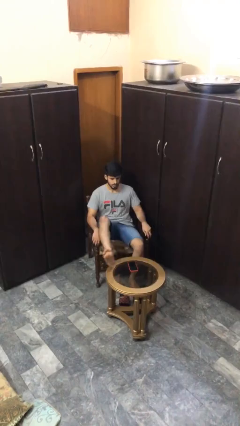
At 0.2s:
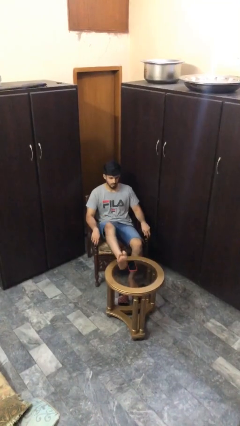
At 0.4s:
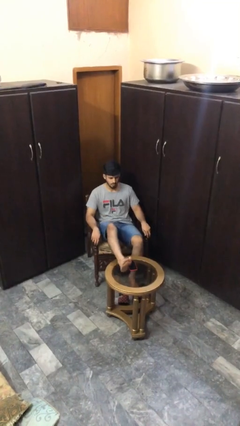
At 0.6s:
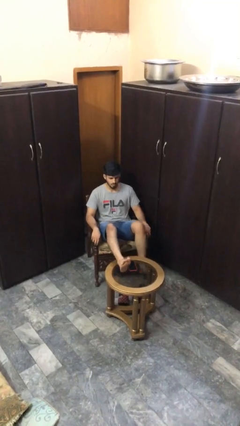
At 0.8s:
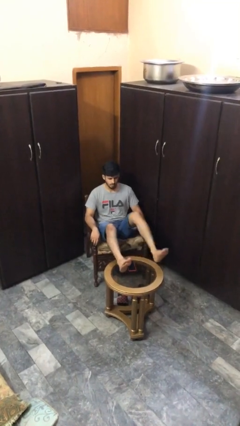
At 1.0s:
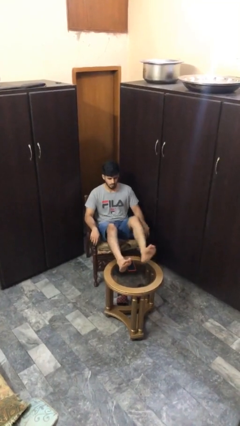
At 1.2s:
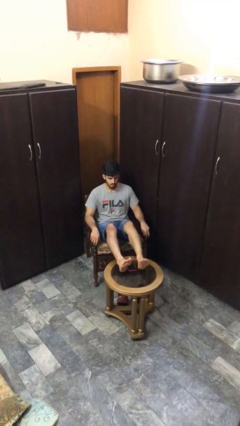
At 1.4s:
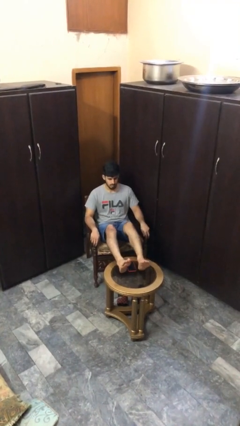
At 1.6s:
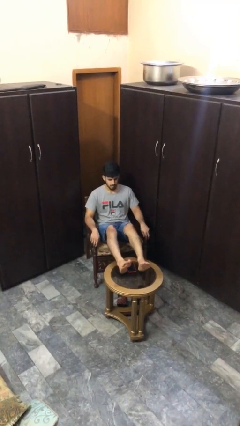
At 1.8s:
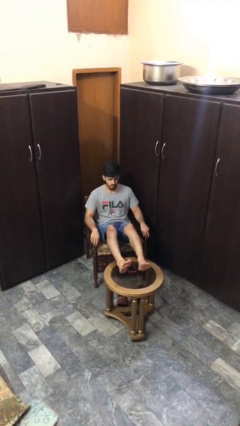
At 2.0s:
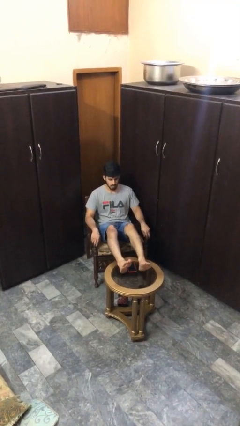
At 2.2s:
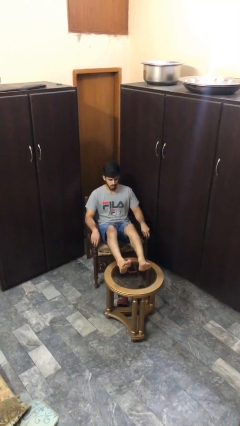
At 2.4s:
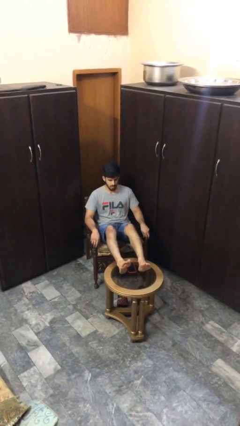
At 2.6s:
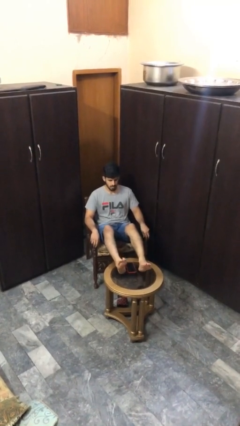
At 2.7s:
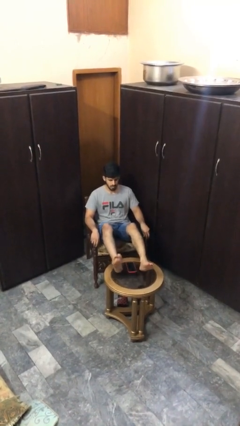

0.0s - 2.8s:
person puts feet up

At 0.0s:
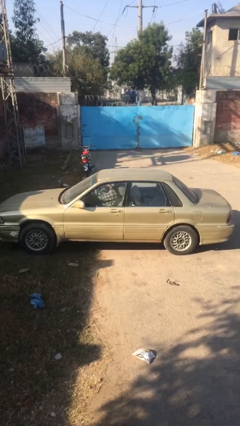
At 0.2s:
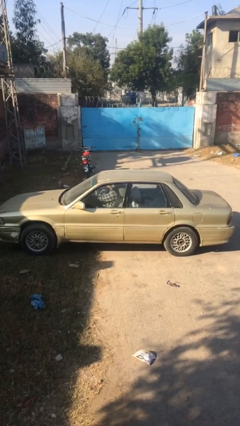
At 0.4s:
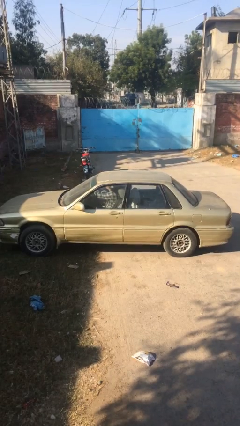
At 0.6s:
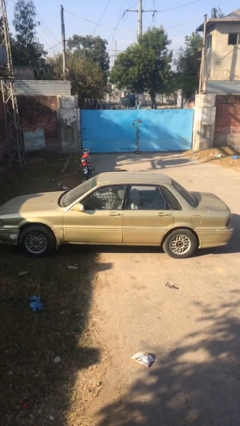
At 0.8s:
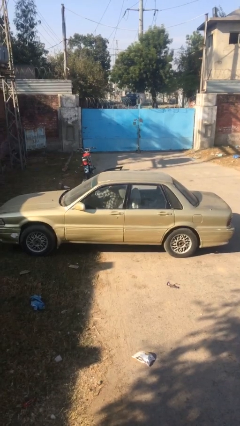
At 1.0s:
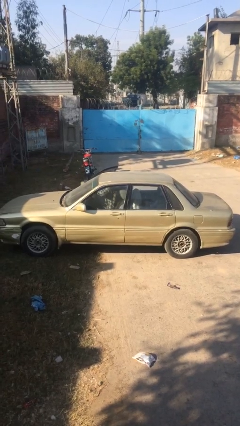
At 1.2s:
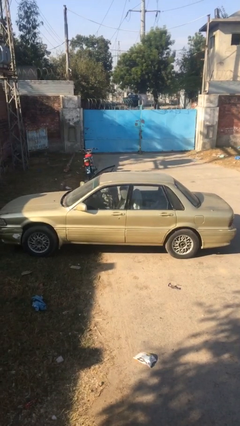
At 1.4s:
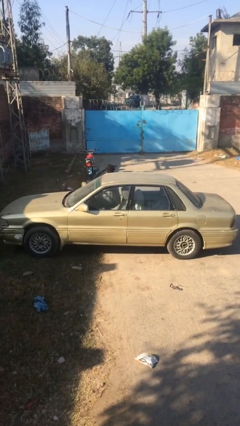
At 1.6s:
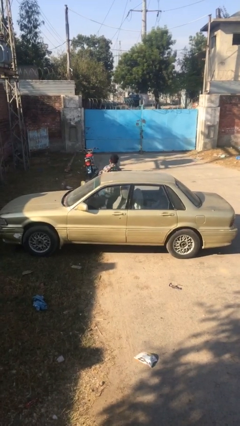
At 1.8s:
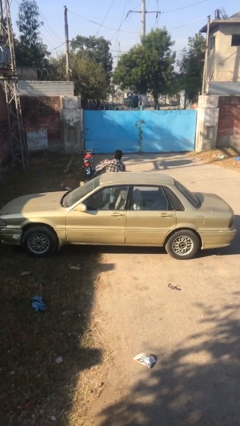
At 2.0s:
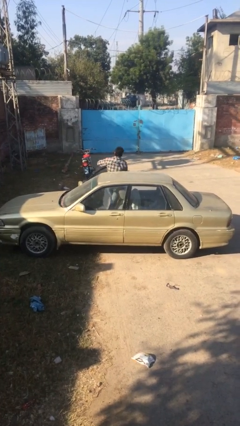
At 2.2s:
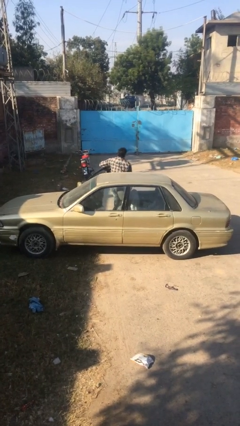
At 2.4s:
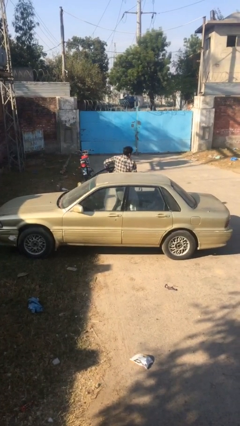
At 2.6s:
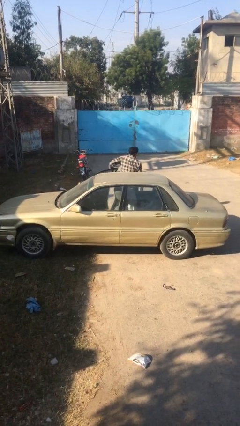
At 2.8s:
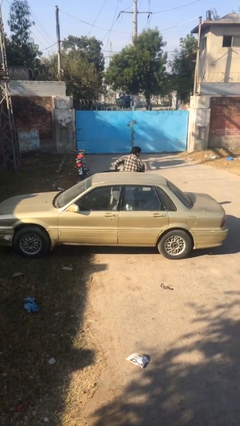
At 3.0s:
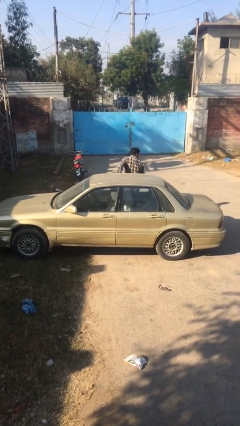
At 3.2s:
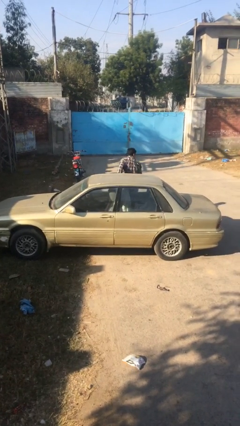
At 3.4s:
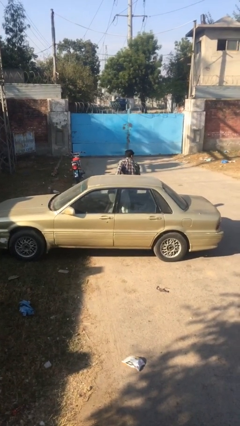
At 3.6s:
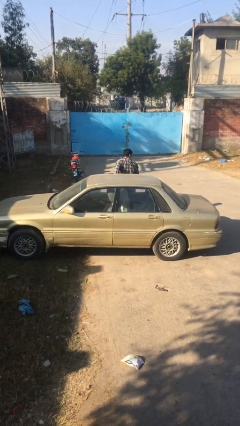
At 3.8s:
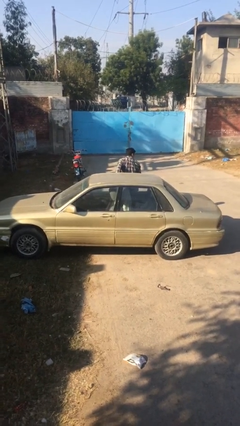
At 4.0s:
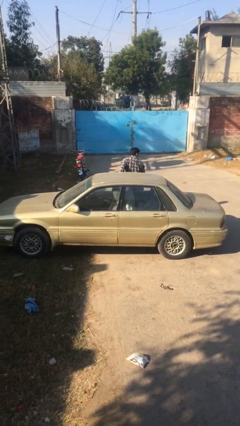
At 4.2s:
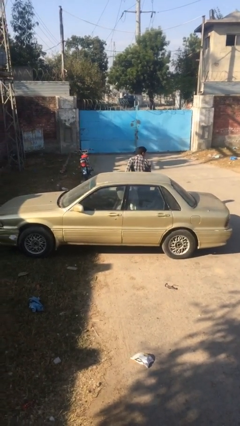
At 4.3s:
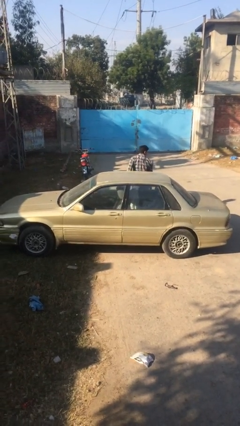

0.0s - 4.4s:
car drops off person

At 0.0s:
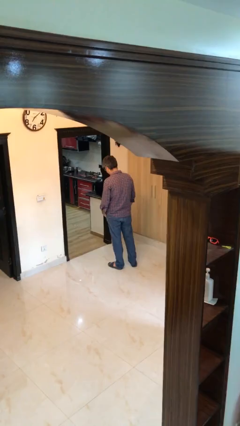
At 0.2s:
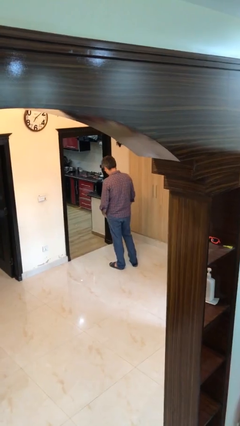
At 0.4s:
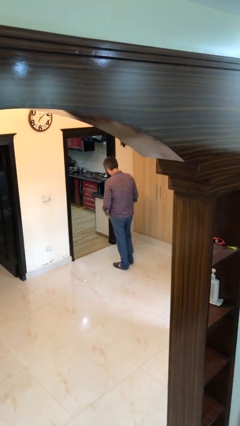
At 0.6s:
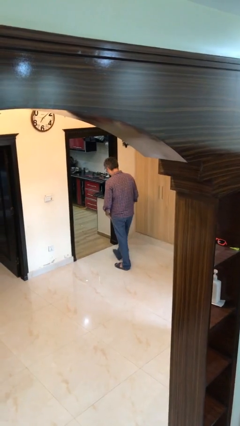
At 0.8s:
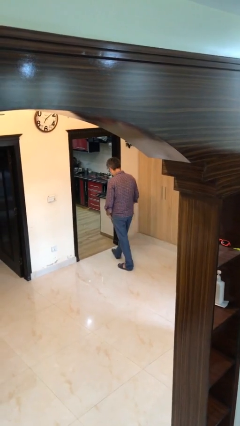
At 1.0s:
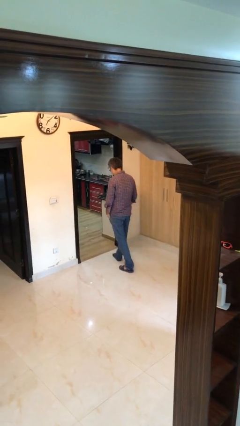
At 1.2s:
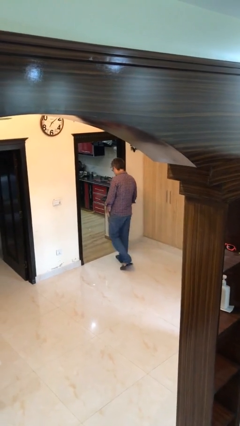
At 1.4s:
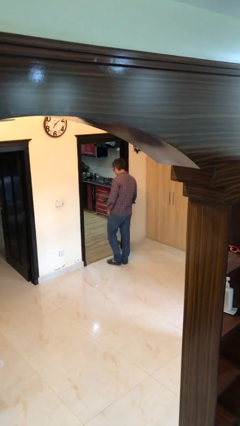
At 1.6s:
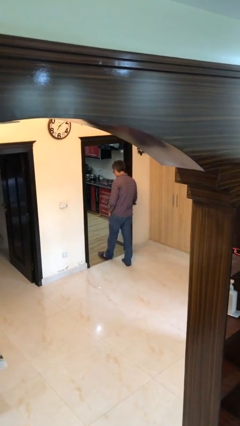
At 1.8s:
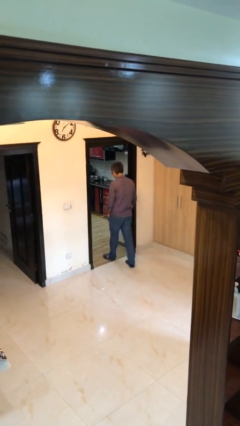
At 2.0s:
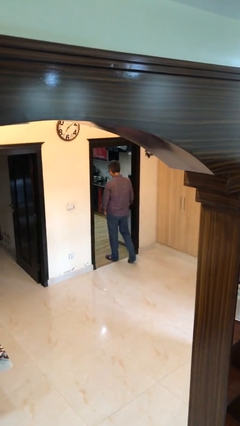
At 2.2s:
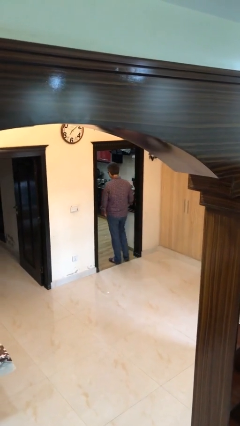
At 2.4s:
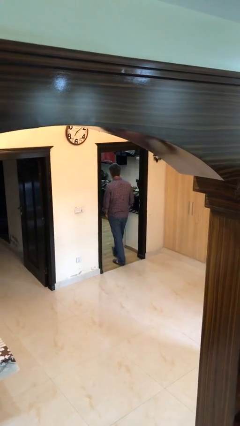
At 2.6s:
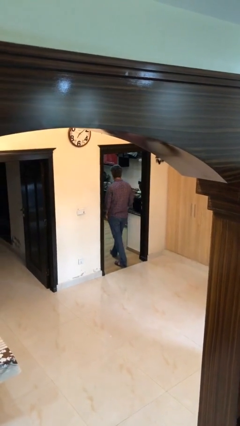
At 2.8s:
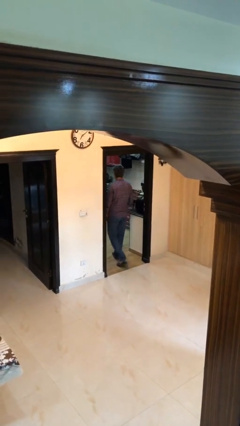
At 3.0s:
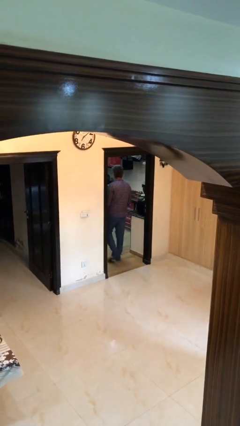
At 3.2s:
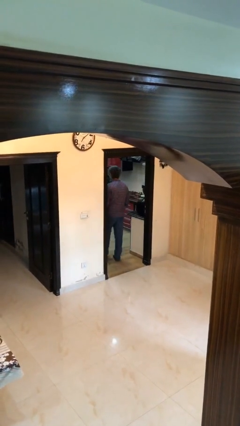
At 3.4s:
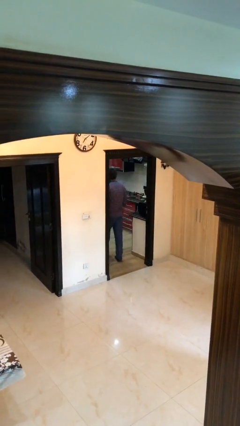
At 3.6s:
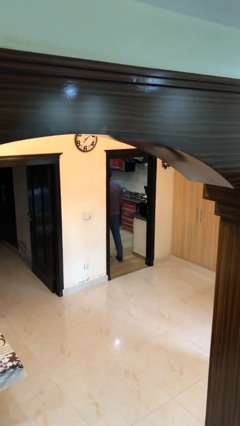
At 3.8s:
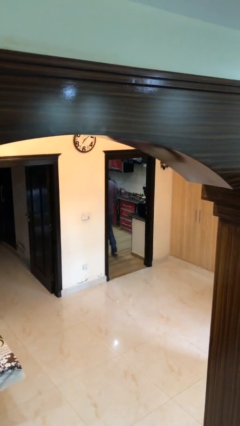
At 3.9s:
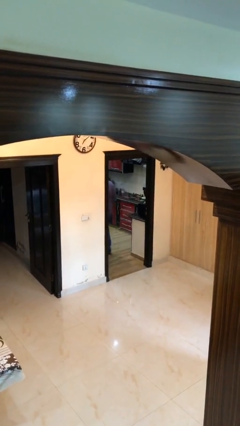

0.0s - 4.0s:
person exits scene through structure

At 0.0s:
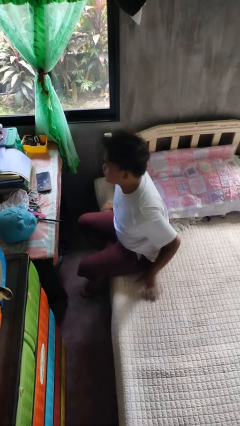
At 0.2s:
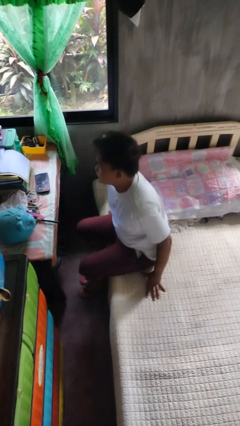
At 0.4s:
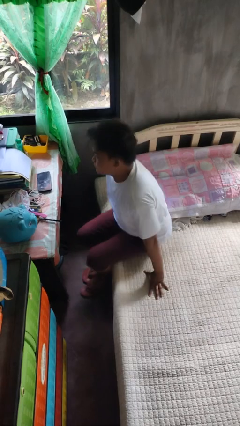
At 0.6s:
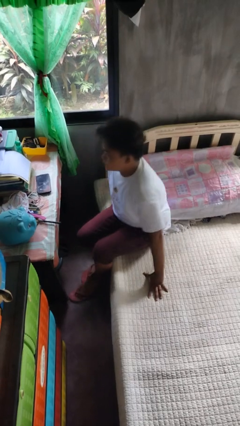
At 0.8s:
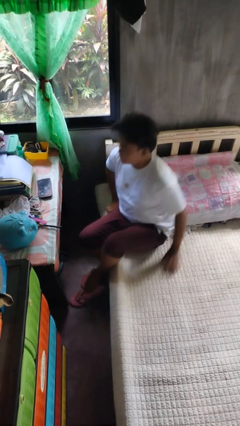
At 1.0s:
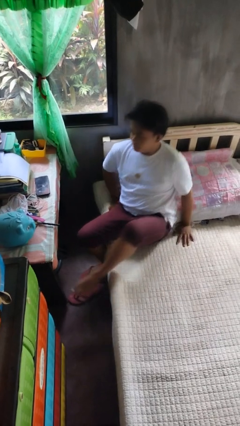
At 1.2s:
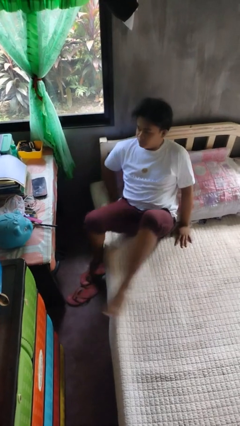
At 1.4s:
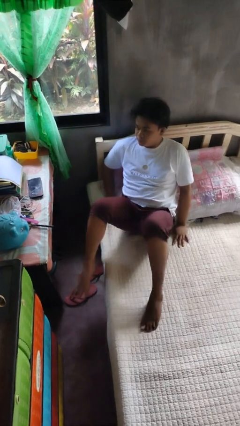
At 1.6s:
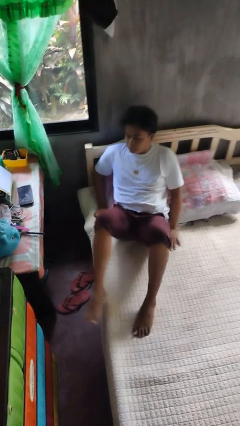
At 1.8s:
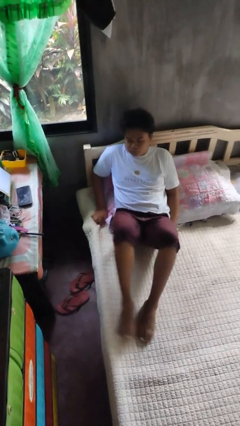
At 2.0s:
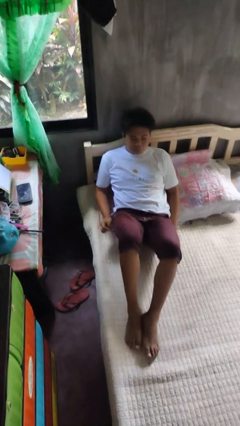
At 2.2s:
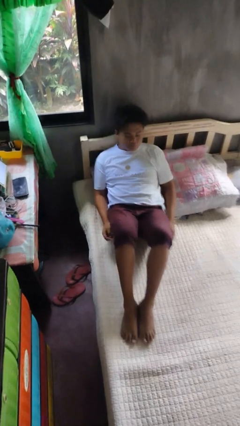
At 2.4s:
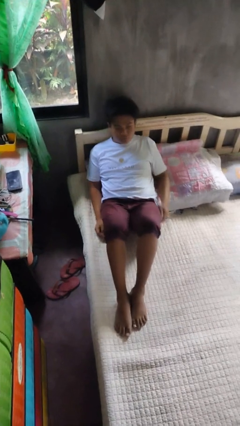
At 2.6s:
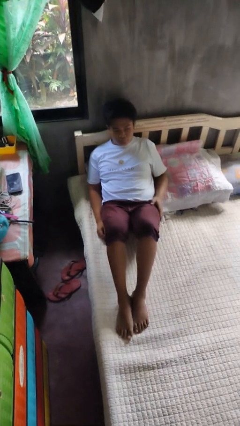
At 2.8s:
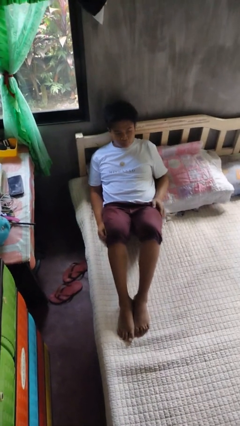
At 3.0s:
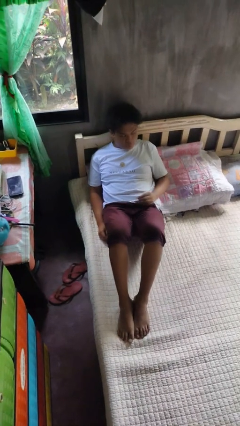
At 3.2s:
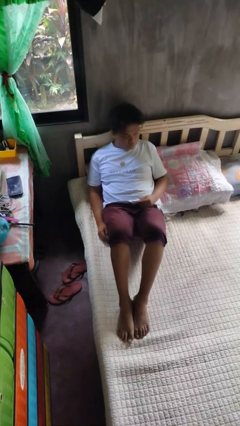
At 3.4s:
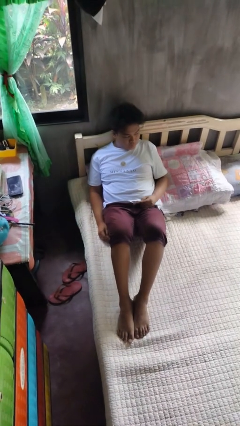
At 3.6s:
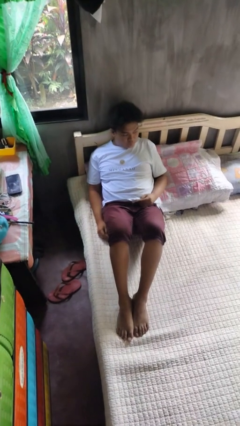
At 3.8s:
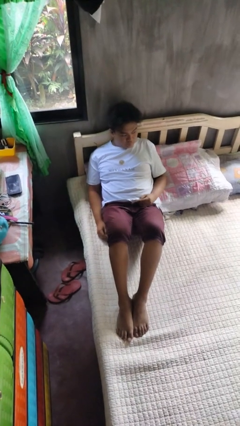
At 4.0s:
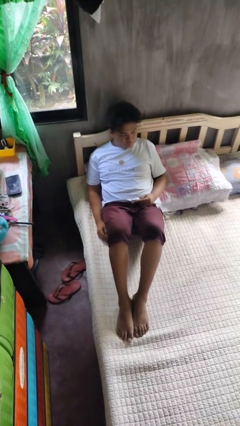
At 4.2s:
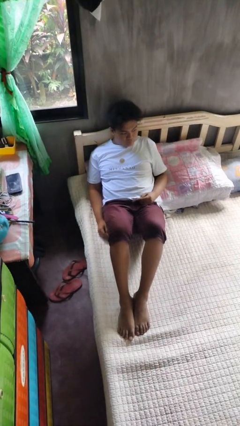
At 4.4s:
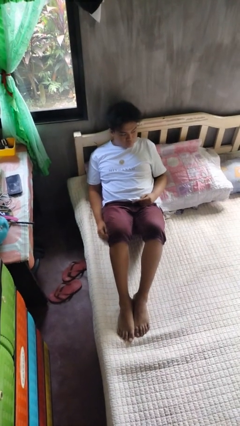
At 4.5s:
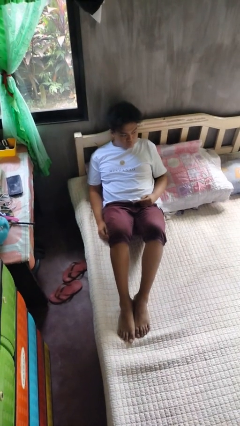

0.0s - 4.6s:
person lies down on bed

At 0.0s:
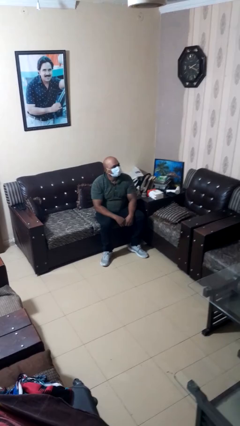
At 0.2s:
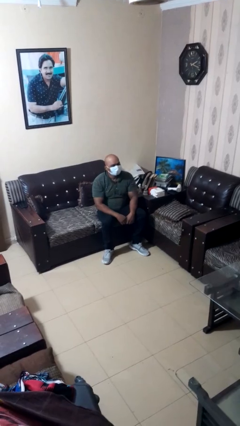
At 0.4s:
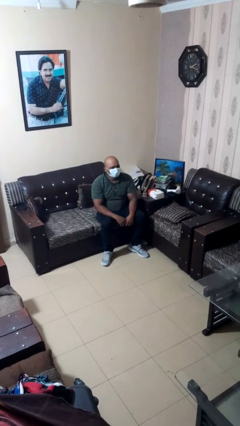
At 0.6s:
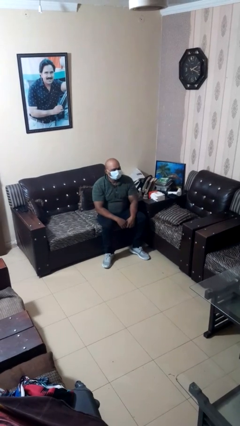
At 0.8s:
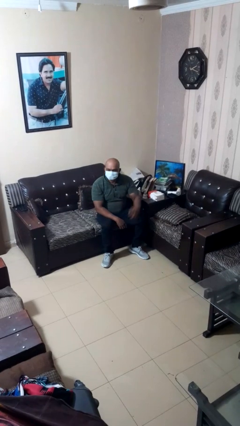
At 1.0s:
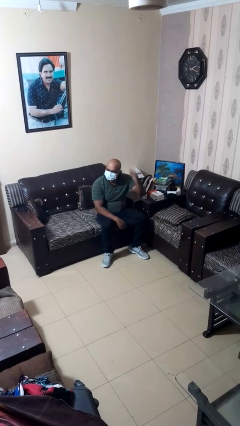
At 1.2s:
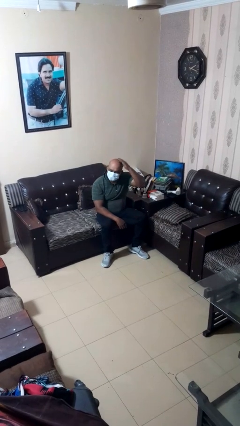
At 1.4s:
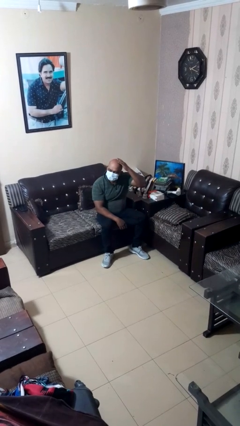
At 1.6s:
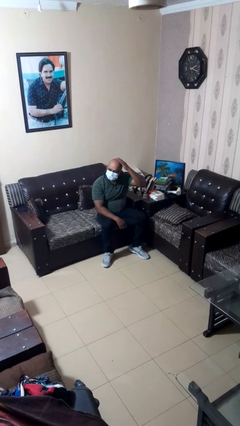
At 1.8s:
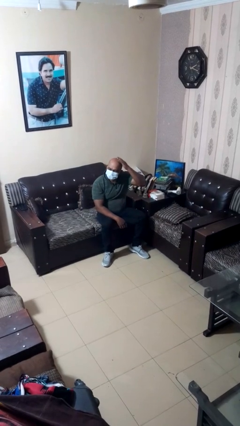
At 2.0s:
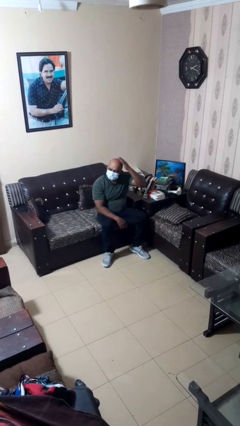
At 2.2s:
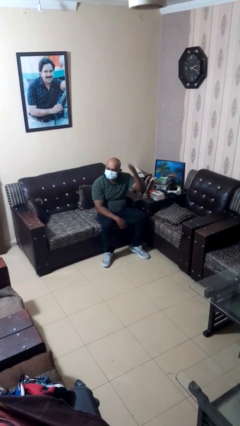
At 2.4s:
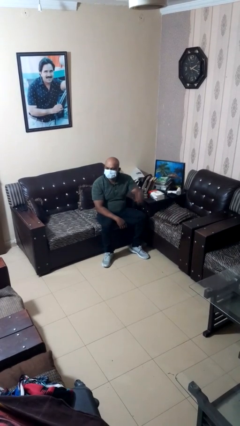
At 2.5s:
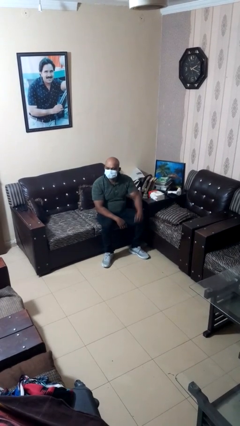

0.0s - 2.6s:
person pats head
